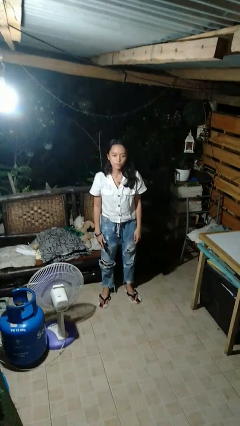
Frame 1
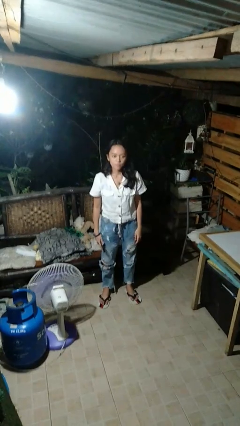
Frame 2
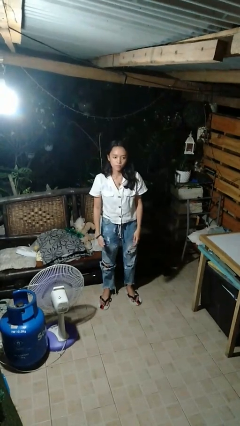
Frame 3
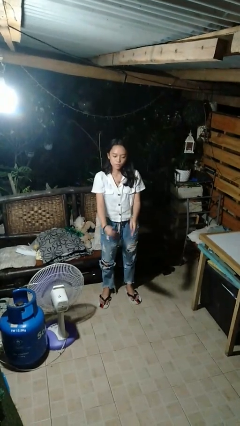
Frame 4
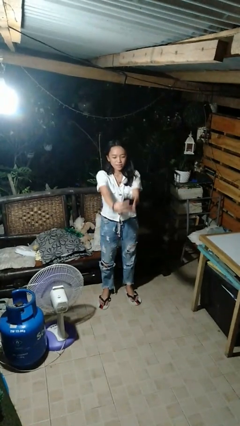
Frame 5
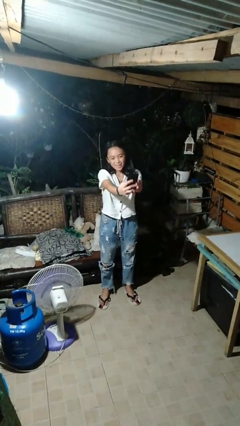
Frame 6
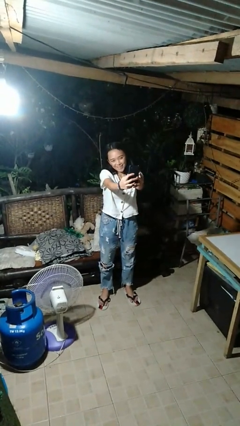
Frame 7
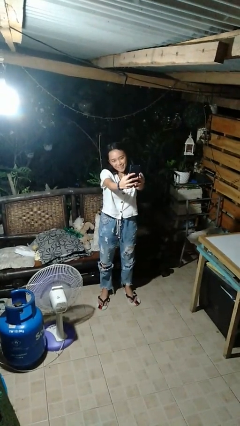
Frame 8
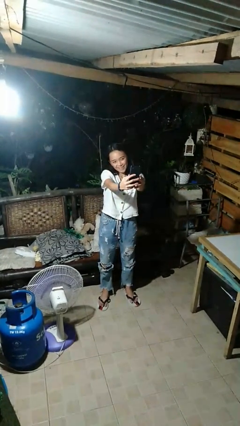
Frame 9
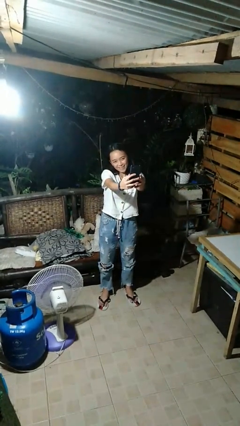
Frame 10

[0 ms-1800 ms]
person takes selfie

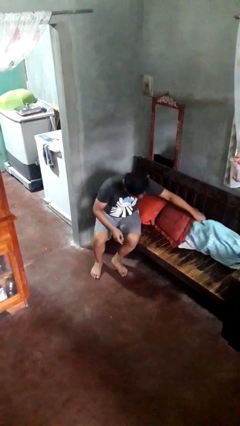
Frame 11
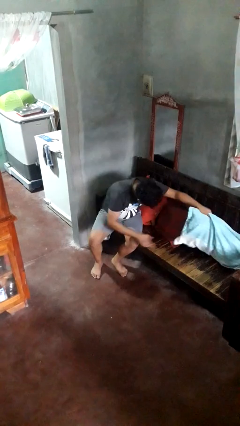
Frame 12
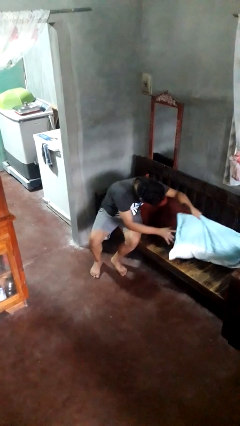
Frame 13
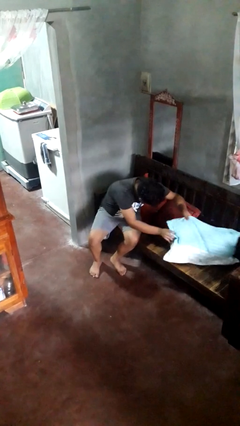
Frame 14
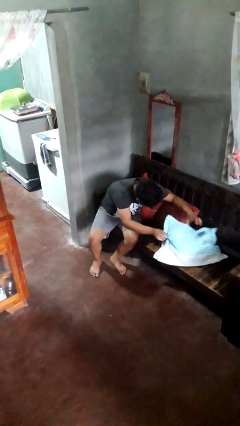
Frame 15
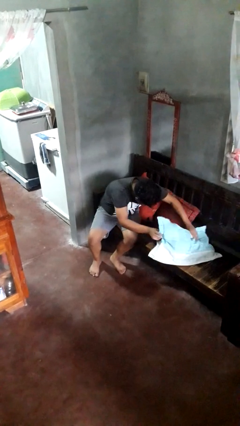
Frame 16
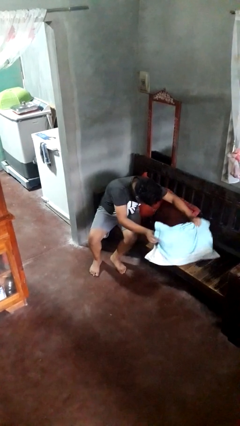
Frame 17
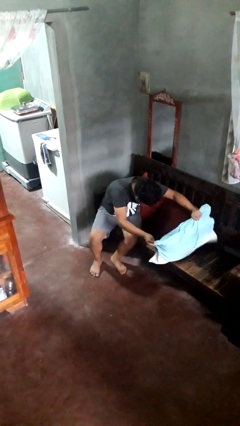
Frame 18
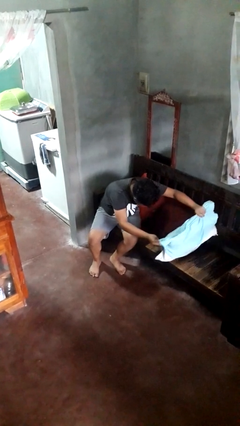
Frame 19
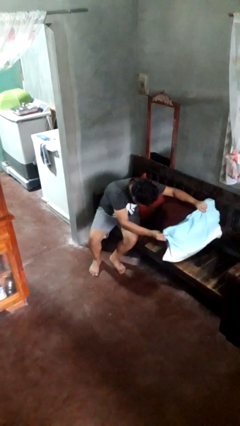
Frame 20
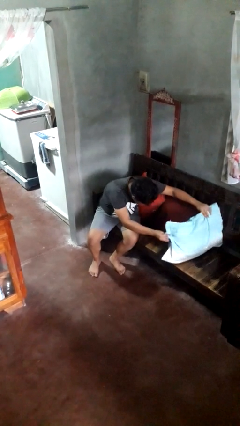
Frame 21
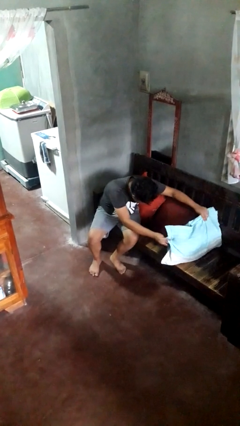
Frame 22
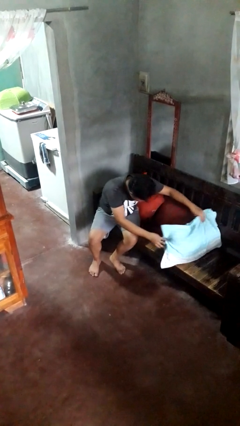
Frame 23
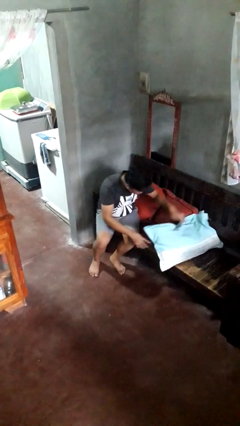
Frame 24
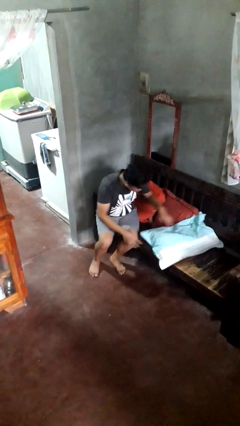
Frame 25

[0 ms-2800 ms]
person searches in couch

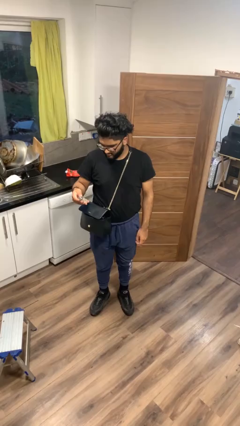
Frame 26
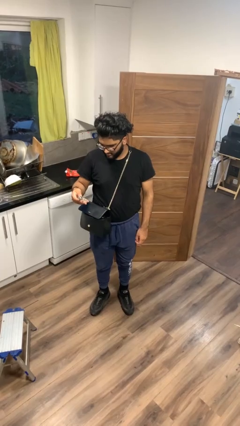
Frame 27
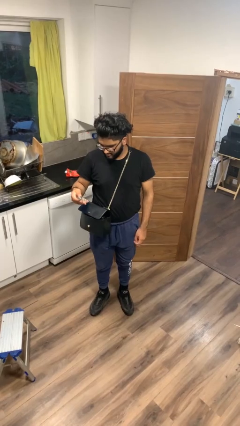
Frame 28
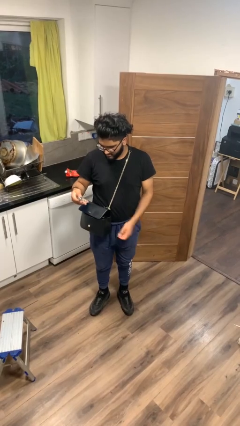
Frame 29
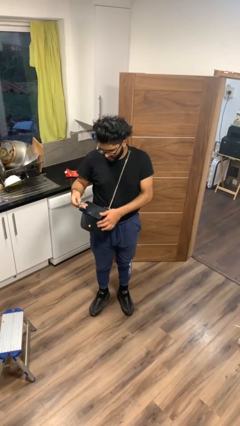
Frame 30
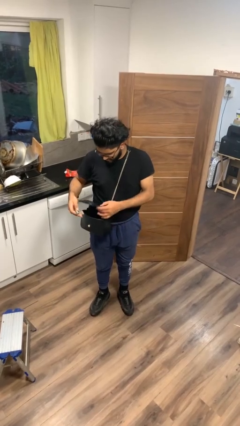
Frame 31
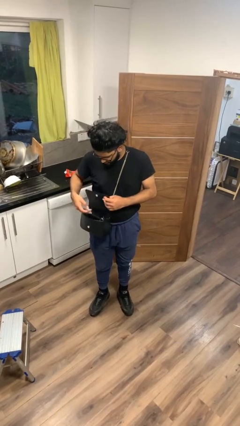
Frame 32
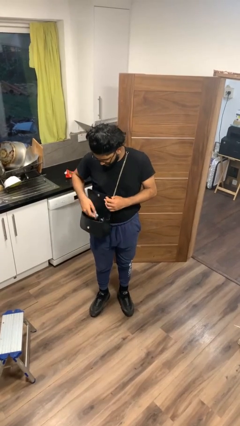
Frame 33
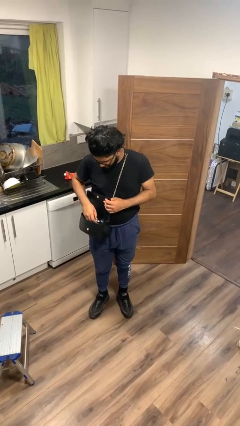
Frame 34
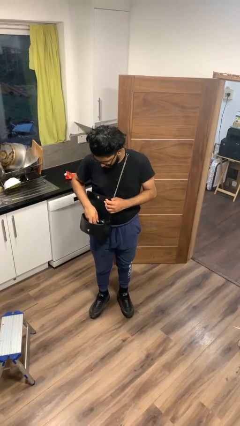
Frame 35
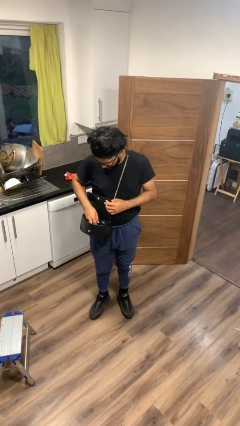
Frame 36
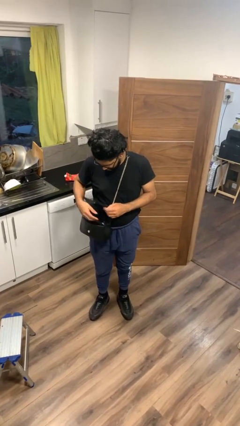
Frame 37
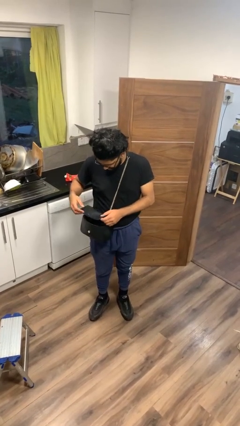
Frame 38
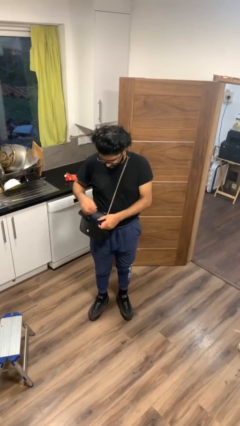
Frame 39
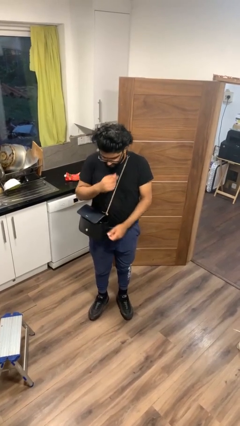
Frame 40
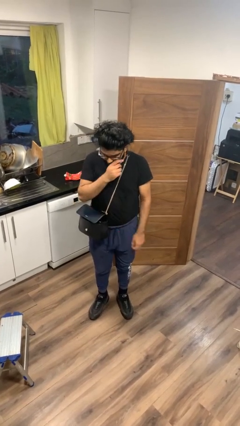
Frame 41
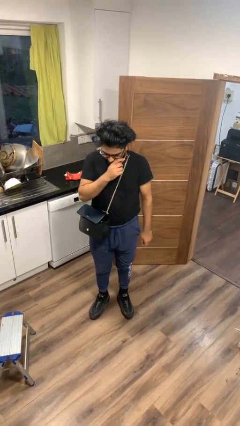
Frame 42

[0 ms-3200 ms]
person puts object into purse

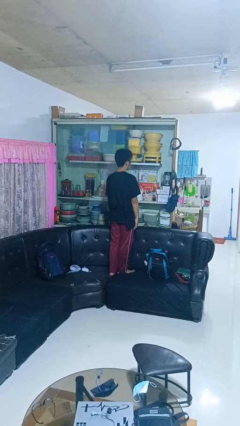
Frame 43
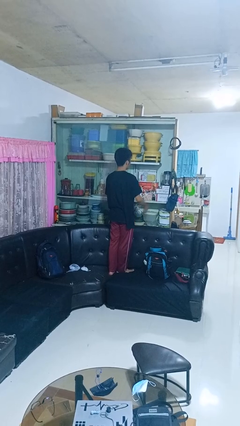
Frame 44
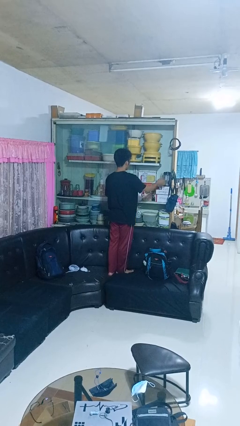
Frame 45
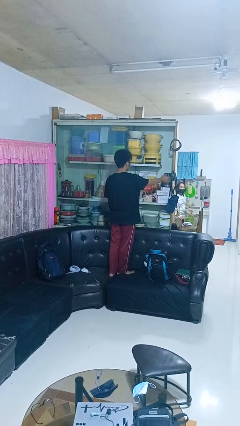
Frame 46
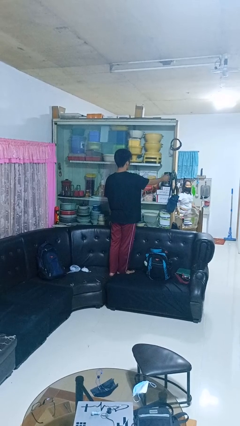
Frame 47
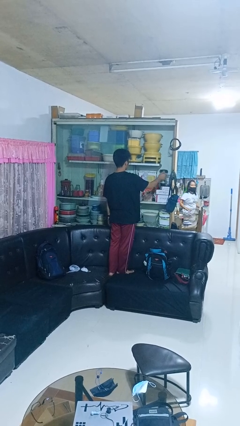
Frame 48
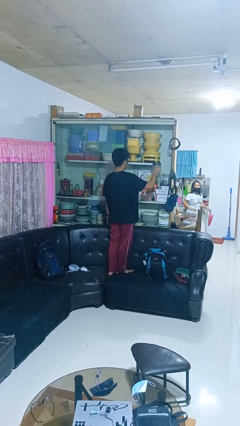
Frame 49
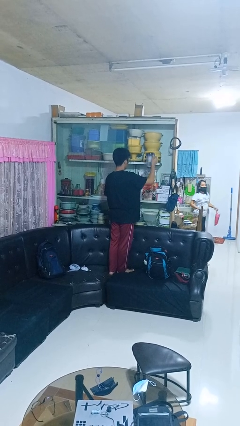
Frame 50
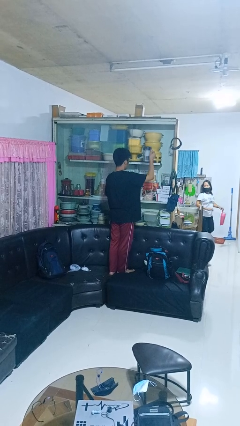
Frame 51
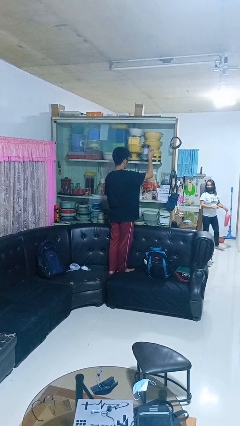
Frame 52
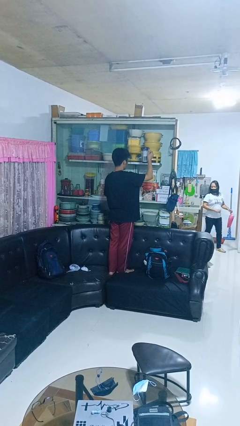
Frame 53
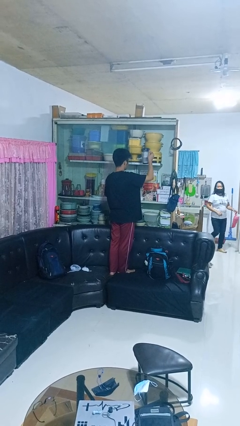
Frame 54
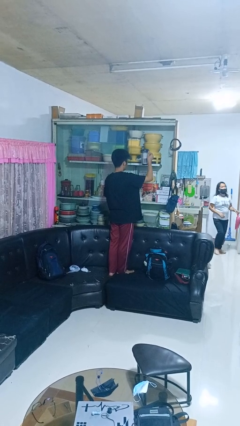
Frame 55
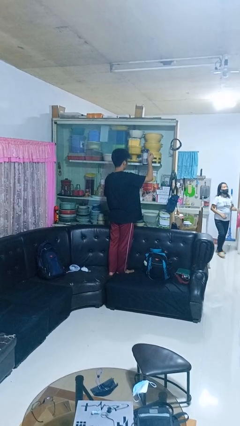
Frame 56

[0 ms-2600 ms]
person picks up object from cabinet

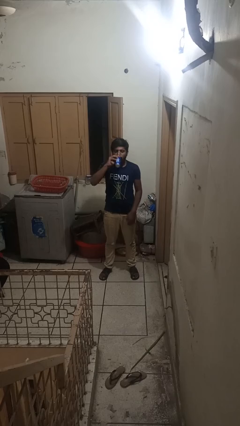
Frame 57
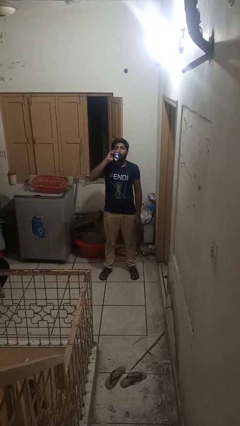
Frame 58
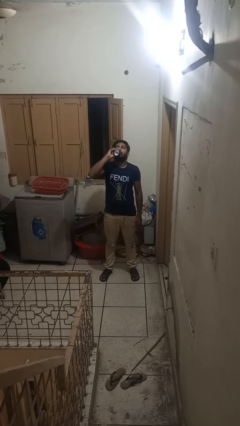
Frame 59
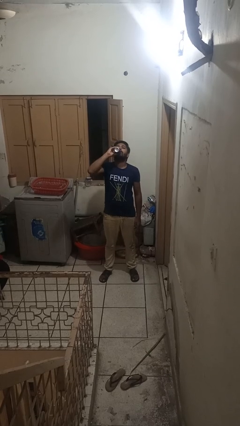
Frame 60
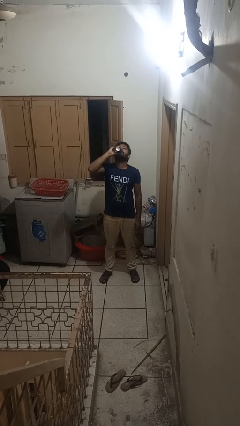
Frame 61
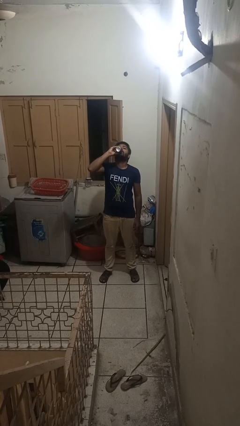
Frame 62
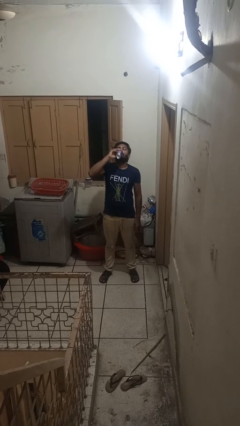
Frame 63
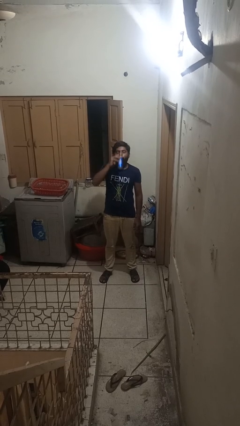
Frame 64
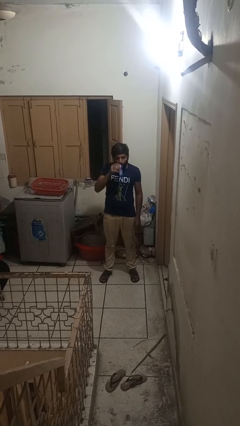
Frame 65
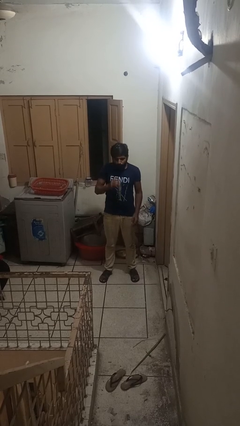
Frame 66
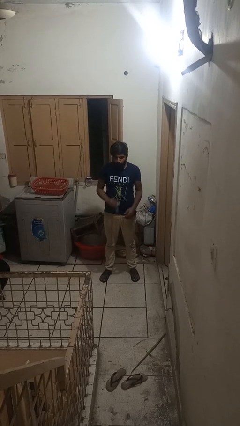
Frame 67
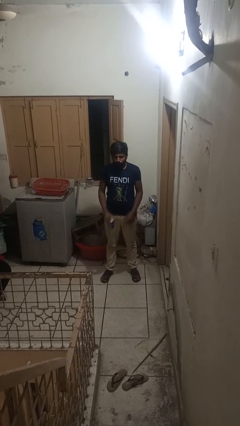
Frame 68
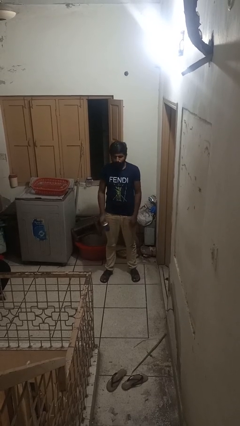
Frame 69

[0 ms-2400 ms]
person drinks from beverage can

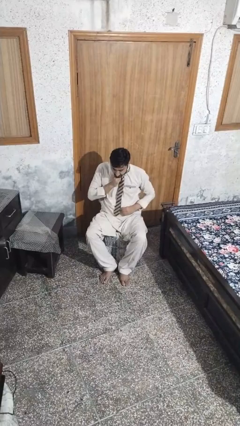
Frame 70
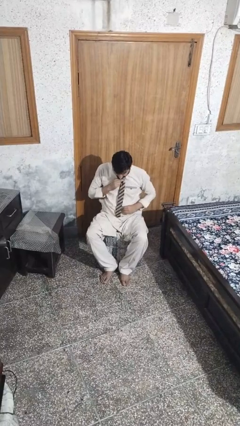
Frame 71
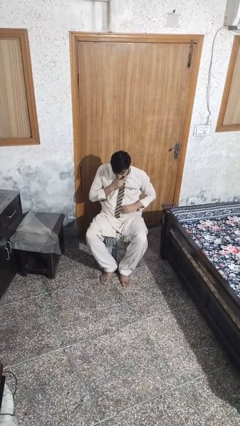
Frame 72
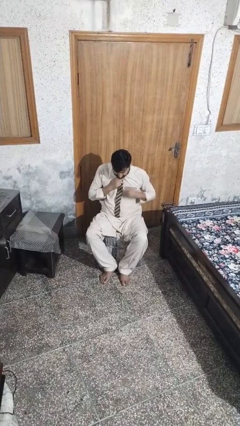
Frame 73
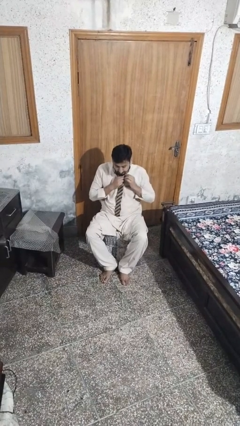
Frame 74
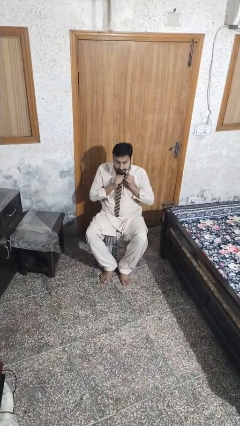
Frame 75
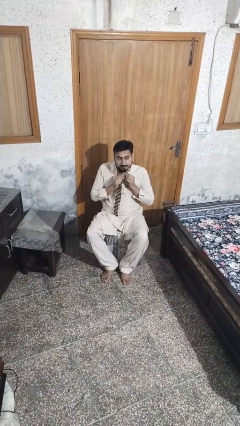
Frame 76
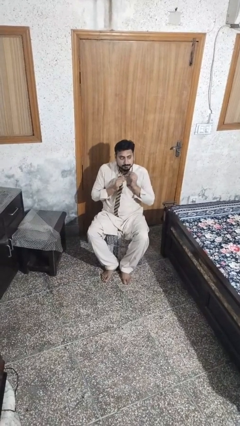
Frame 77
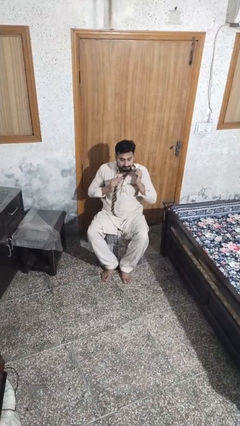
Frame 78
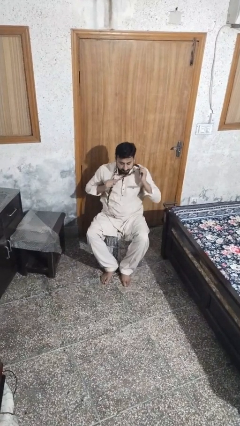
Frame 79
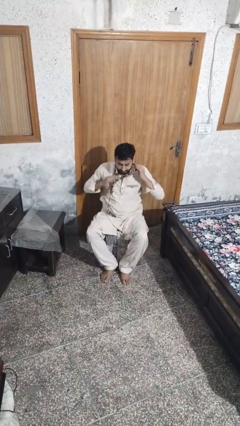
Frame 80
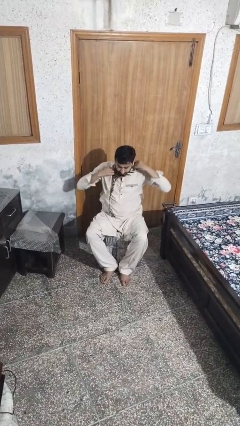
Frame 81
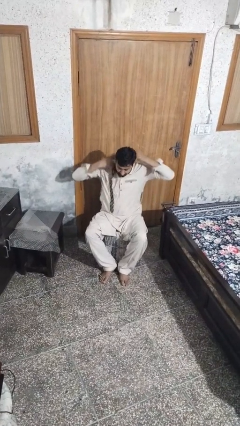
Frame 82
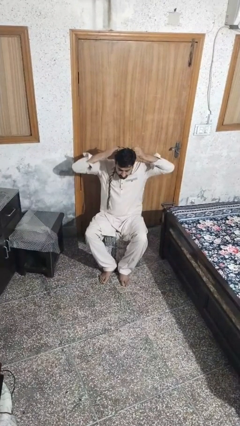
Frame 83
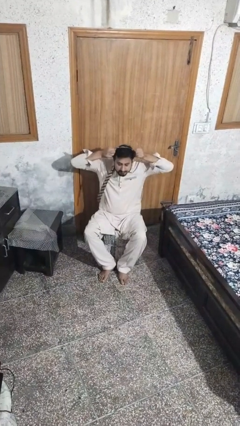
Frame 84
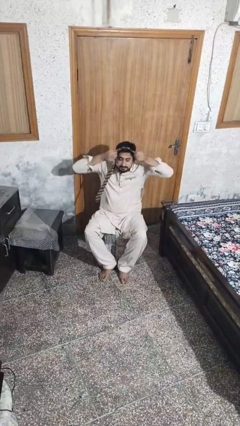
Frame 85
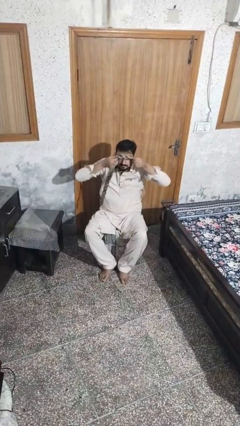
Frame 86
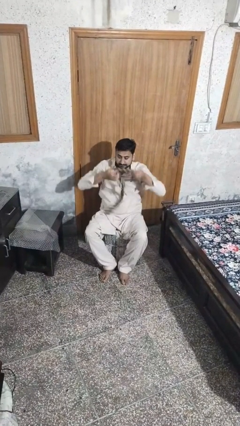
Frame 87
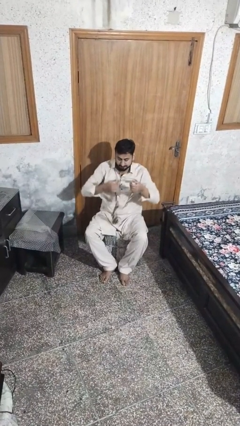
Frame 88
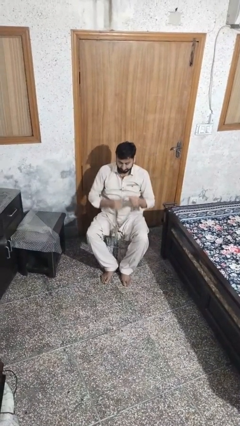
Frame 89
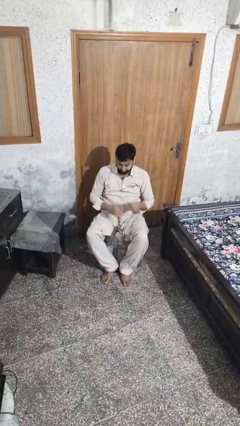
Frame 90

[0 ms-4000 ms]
person takes off necktie

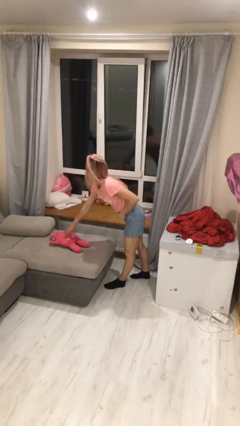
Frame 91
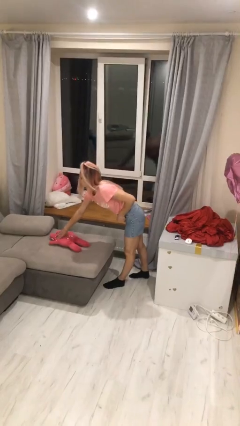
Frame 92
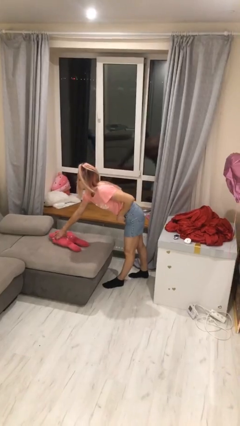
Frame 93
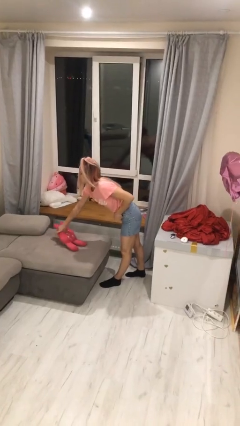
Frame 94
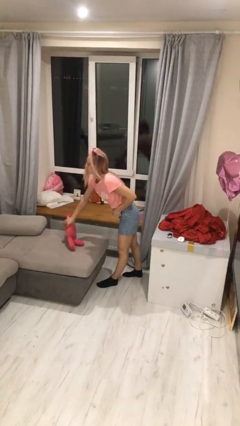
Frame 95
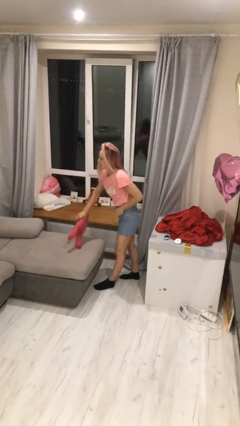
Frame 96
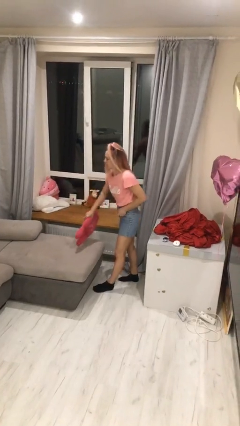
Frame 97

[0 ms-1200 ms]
person picks up object from bed
